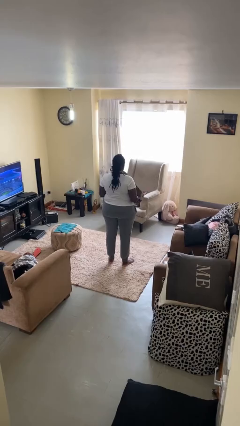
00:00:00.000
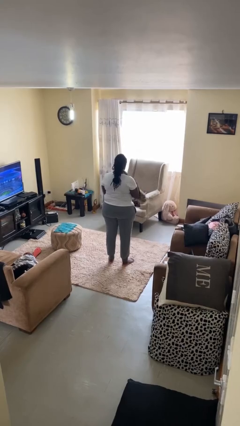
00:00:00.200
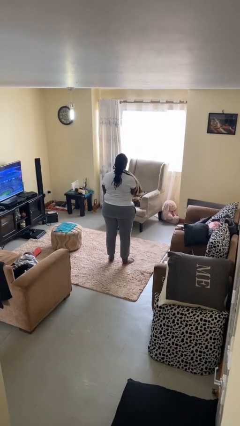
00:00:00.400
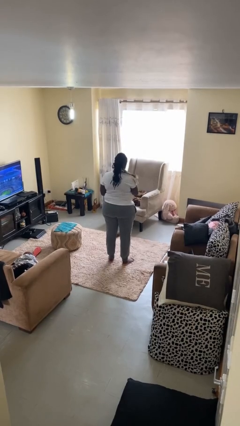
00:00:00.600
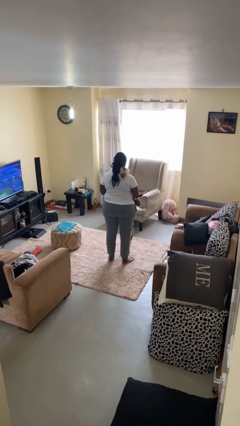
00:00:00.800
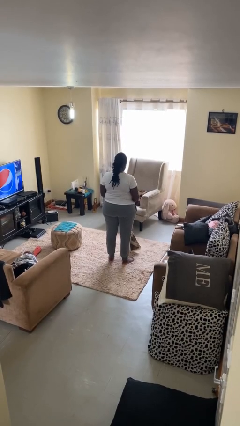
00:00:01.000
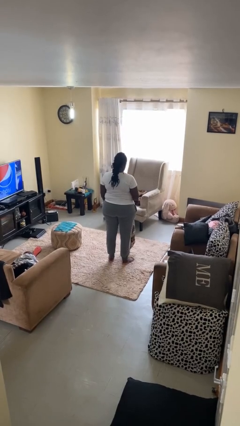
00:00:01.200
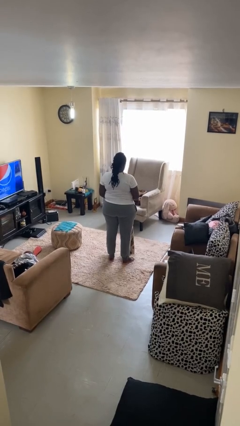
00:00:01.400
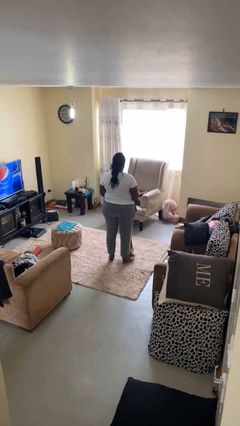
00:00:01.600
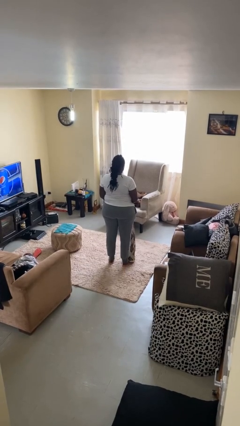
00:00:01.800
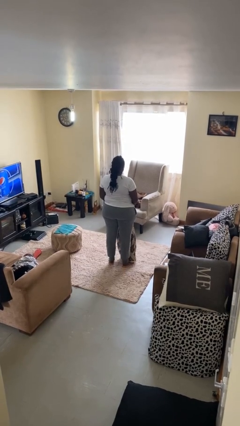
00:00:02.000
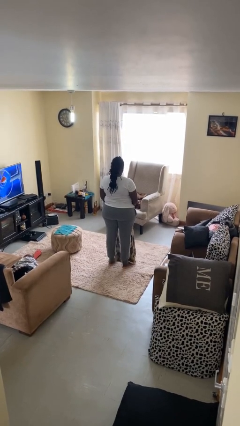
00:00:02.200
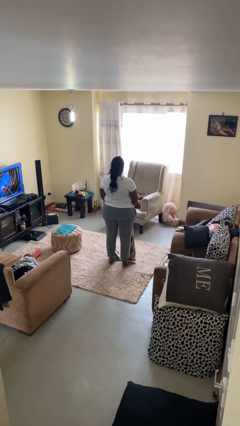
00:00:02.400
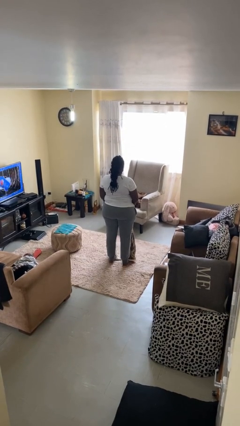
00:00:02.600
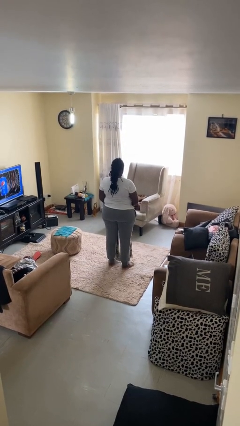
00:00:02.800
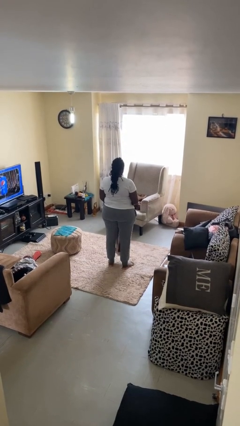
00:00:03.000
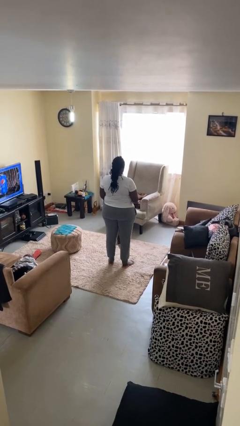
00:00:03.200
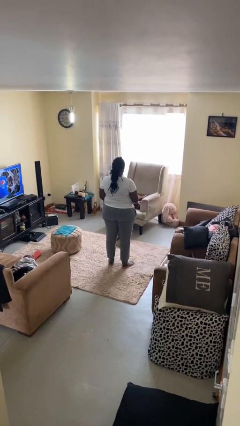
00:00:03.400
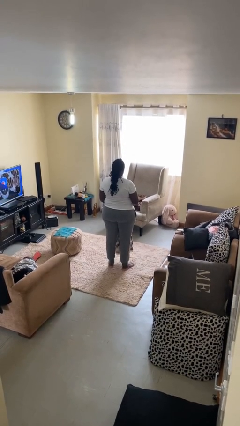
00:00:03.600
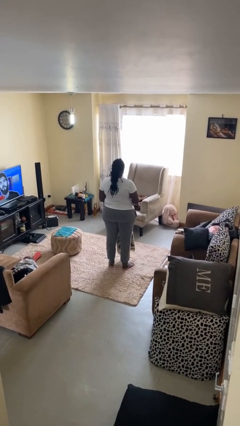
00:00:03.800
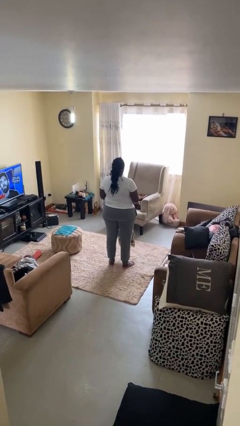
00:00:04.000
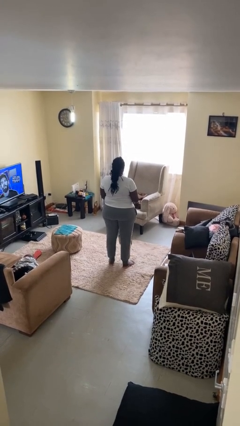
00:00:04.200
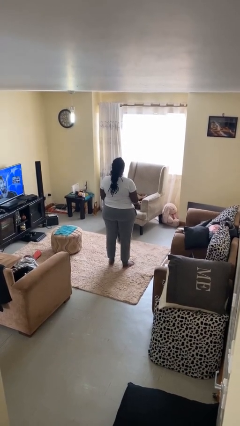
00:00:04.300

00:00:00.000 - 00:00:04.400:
person takes off scarf

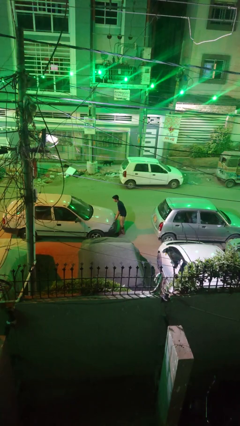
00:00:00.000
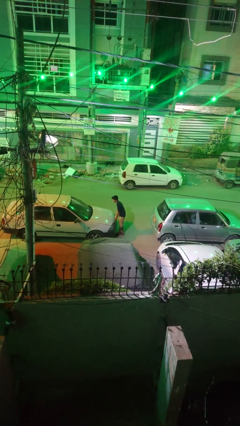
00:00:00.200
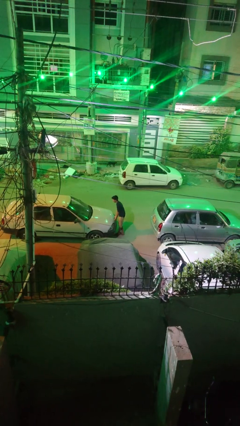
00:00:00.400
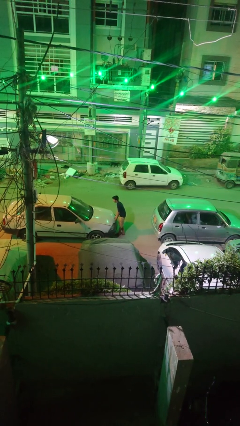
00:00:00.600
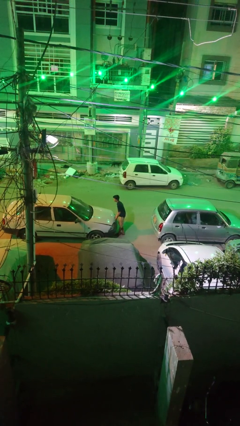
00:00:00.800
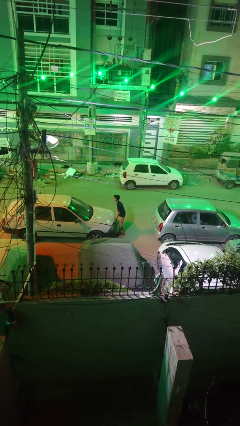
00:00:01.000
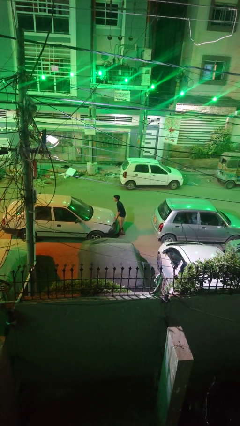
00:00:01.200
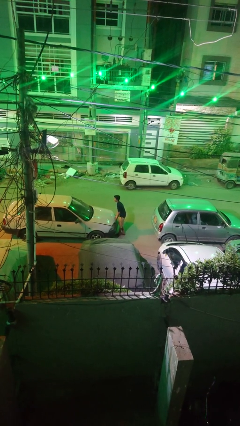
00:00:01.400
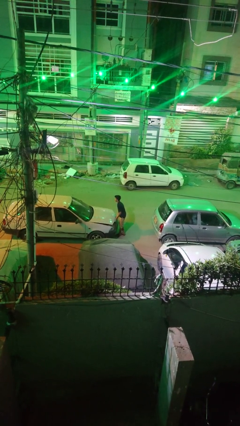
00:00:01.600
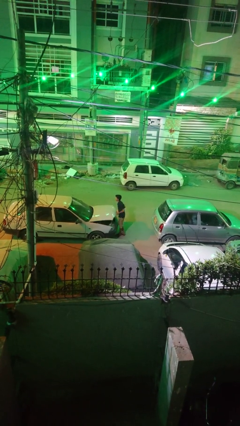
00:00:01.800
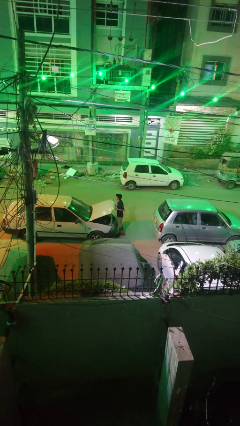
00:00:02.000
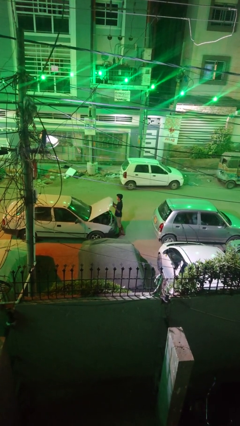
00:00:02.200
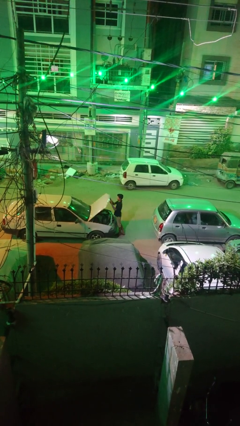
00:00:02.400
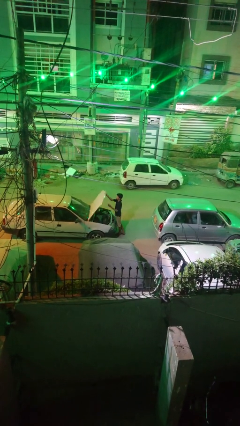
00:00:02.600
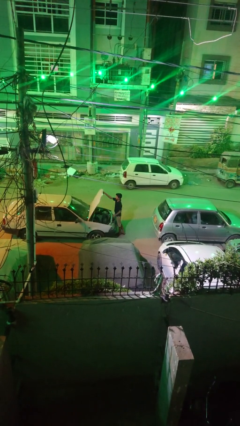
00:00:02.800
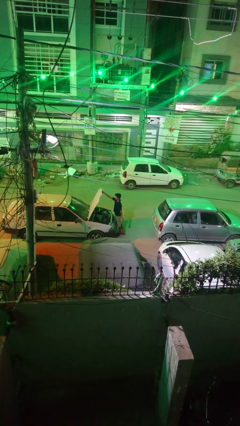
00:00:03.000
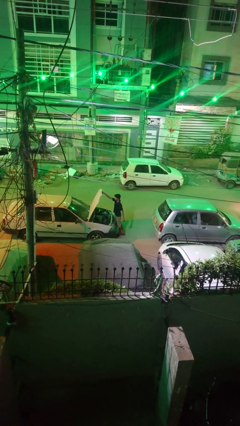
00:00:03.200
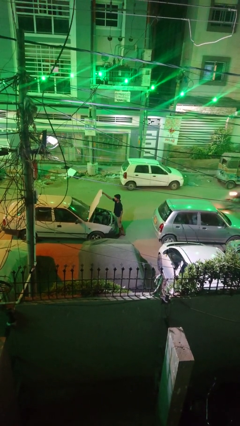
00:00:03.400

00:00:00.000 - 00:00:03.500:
person opens car hood

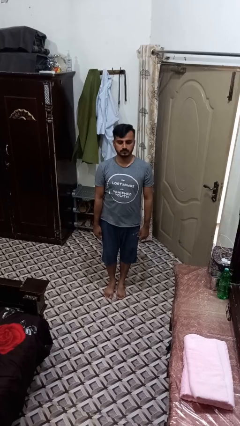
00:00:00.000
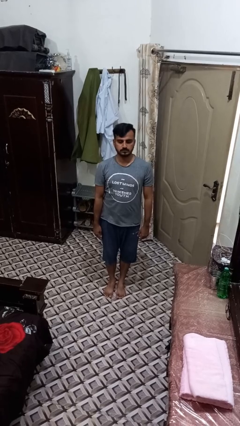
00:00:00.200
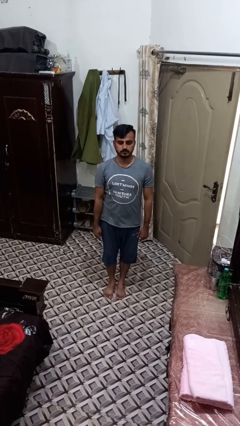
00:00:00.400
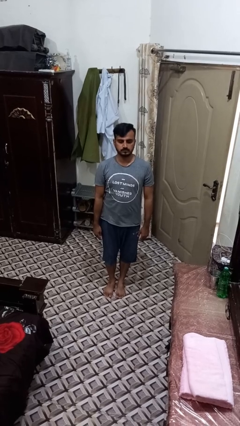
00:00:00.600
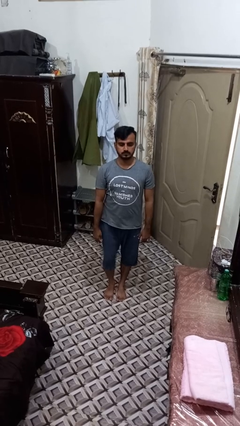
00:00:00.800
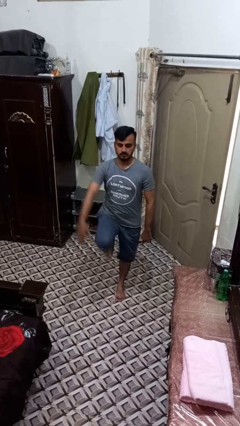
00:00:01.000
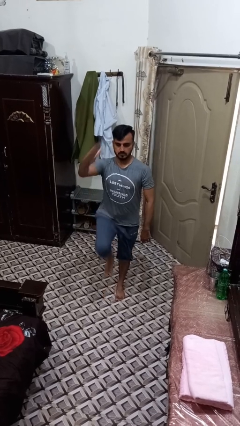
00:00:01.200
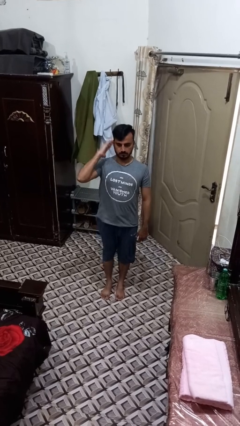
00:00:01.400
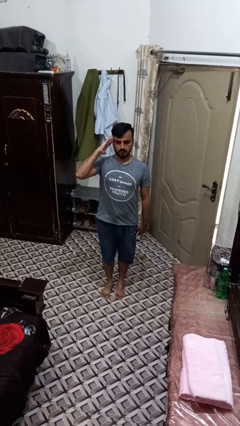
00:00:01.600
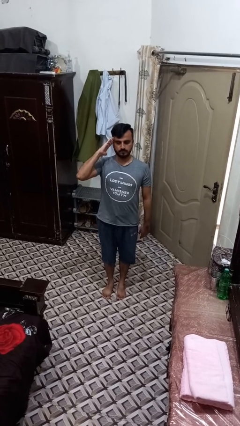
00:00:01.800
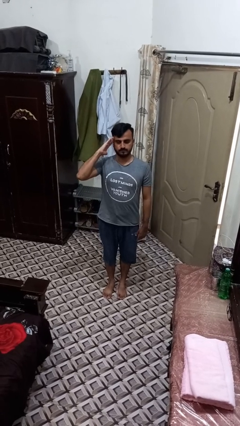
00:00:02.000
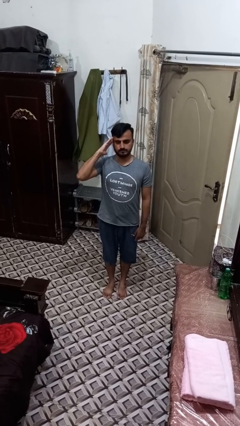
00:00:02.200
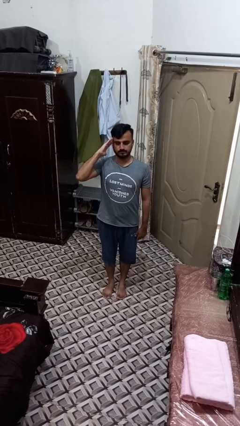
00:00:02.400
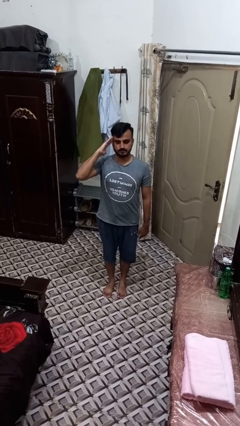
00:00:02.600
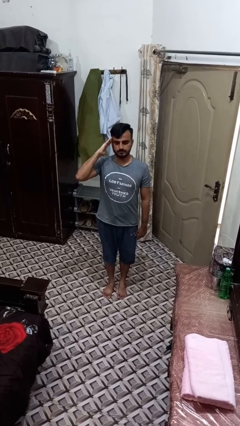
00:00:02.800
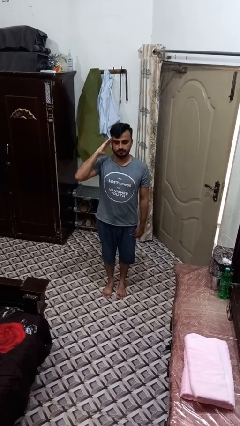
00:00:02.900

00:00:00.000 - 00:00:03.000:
person salutes

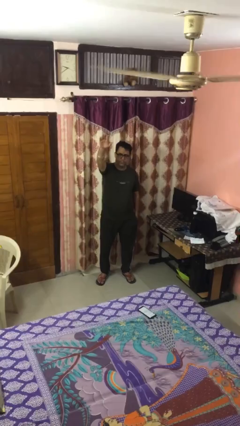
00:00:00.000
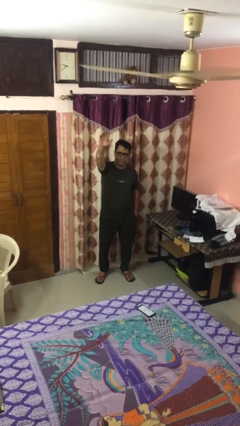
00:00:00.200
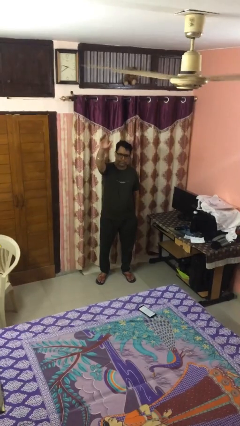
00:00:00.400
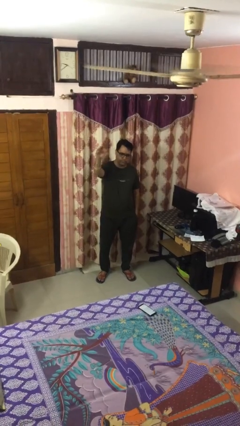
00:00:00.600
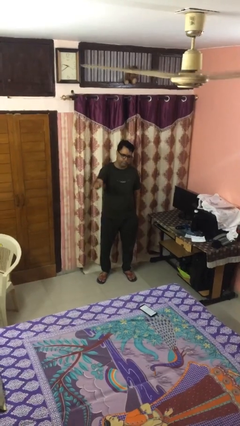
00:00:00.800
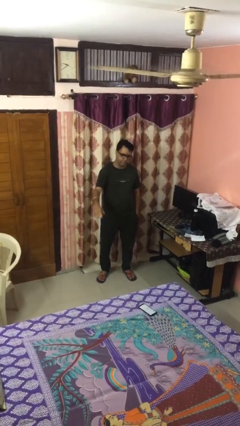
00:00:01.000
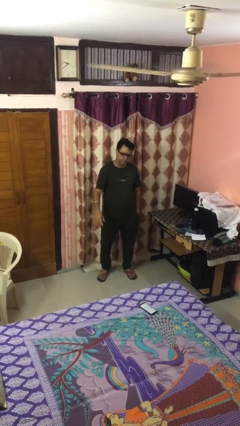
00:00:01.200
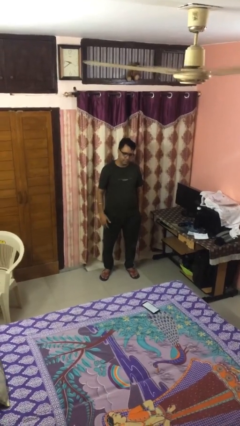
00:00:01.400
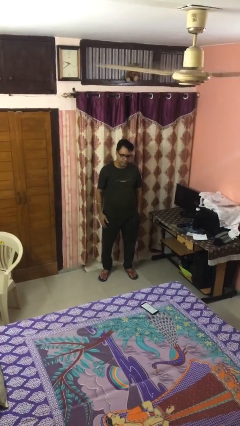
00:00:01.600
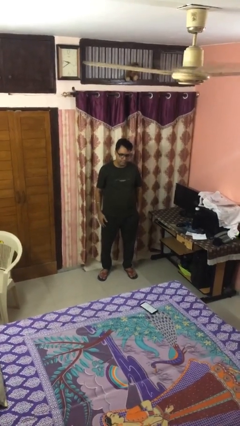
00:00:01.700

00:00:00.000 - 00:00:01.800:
person gestures swipe down

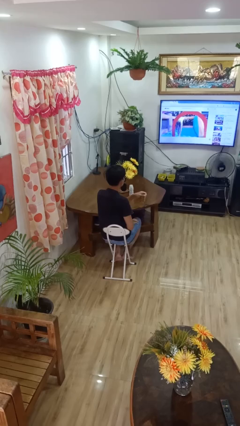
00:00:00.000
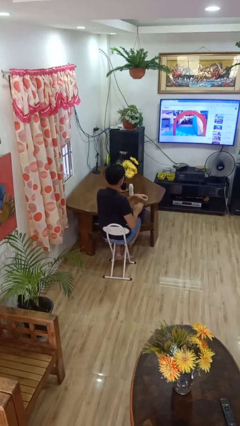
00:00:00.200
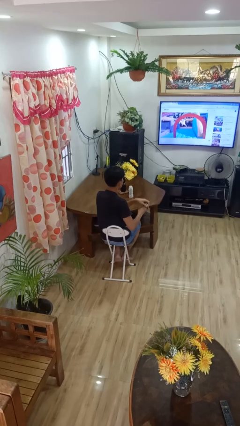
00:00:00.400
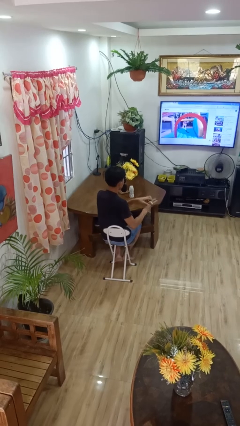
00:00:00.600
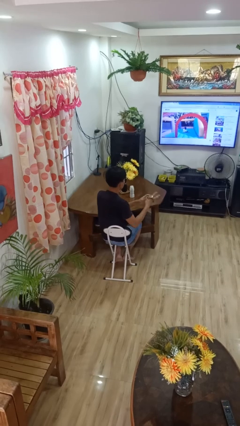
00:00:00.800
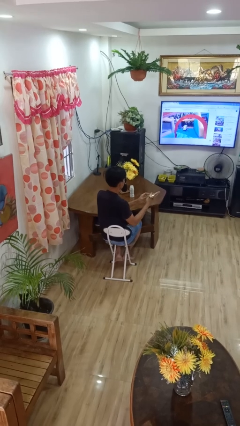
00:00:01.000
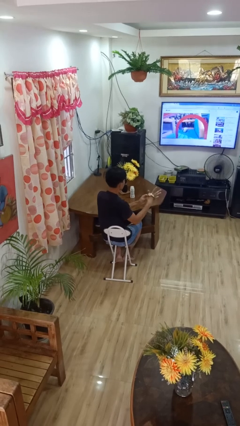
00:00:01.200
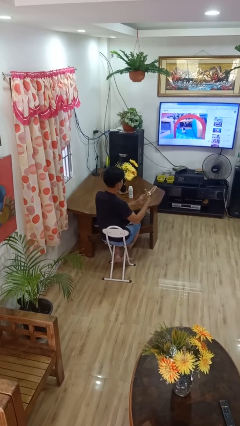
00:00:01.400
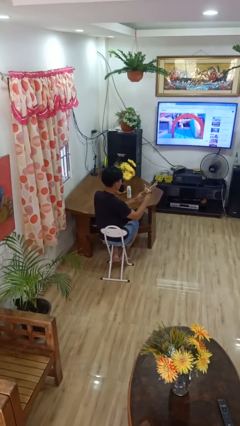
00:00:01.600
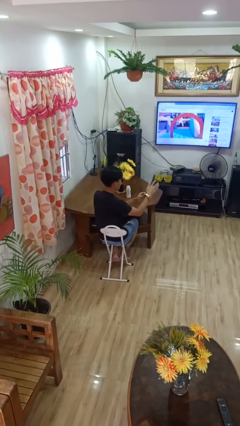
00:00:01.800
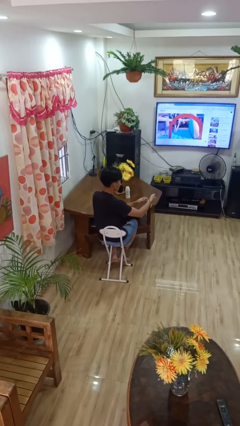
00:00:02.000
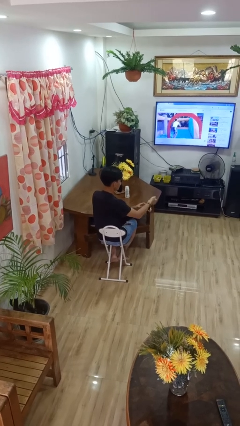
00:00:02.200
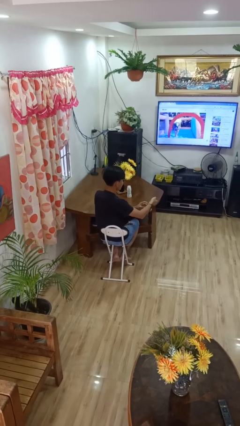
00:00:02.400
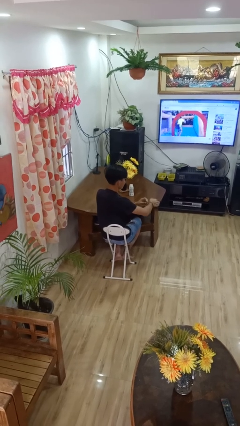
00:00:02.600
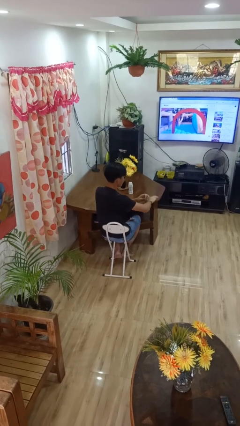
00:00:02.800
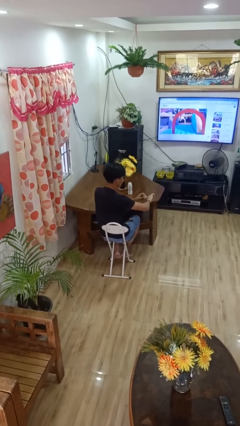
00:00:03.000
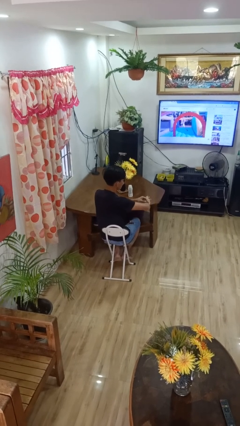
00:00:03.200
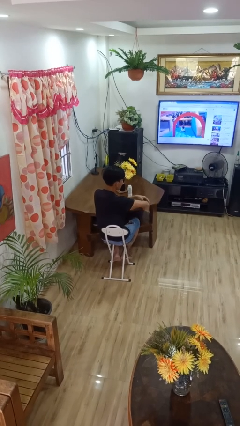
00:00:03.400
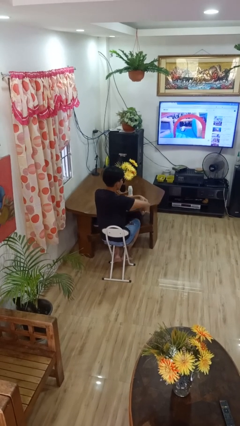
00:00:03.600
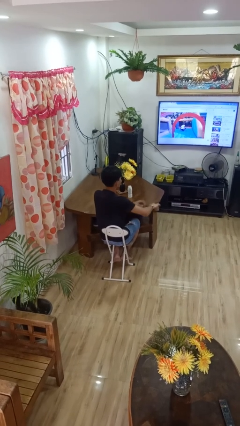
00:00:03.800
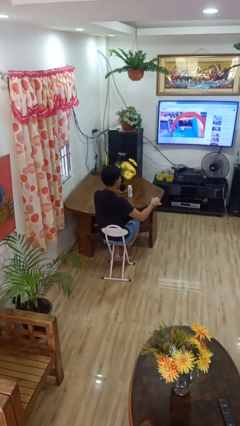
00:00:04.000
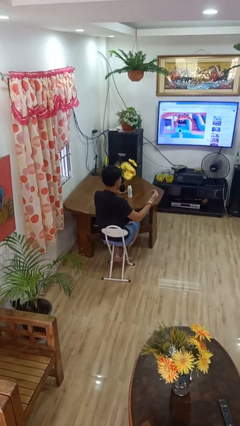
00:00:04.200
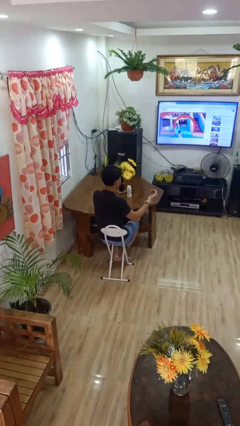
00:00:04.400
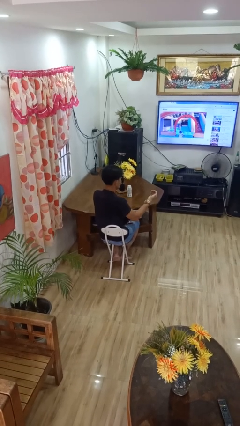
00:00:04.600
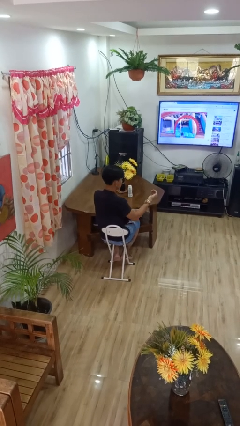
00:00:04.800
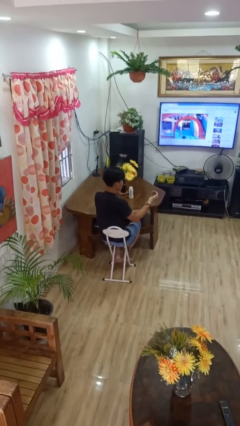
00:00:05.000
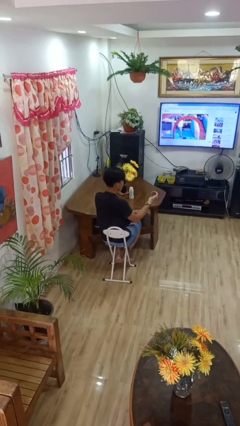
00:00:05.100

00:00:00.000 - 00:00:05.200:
person puts on wristwatch
